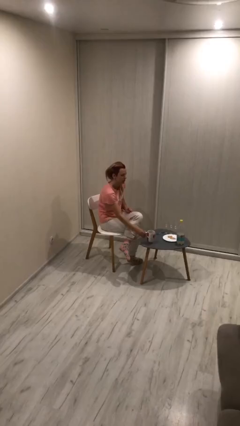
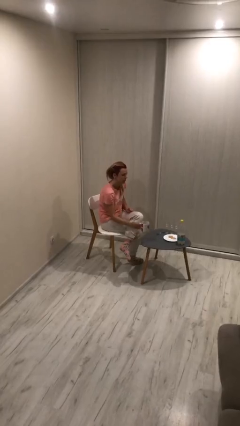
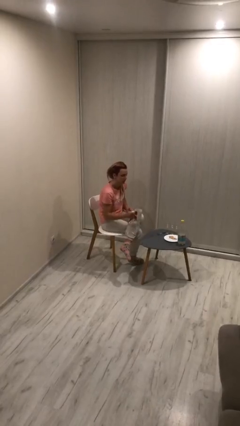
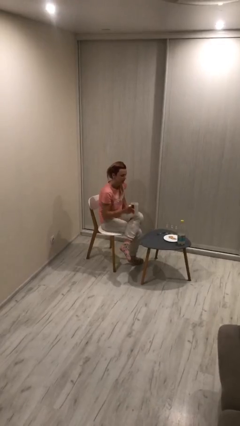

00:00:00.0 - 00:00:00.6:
person picks up object from table

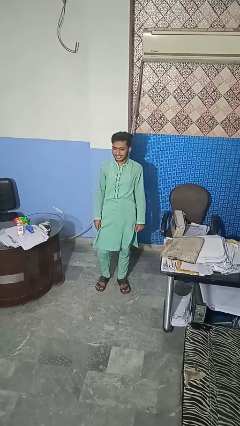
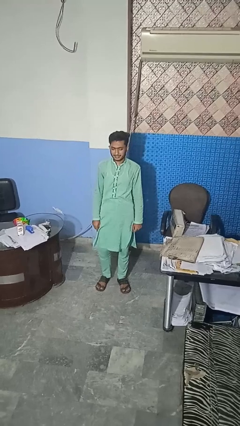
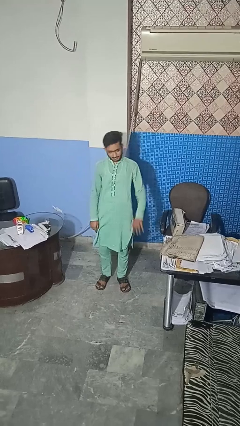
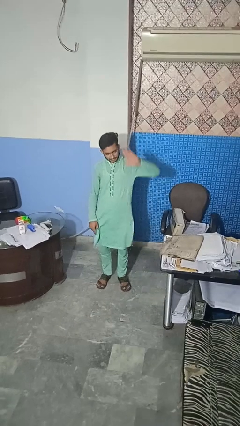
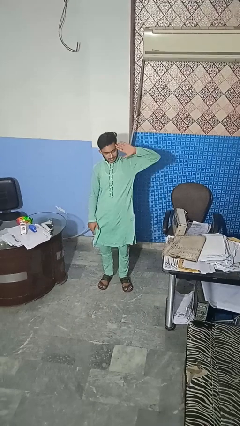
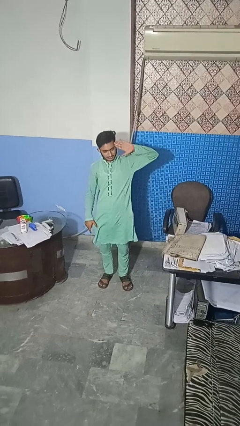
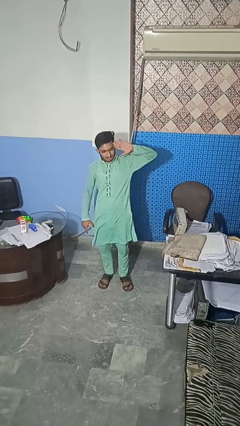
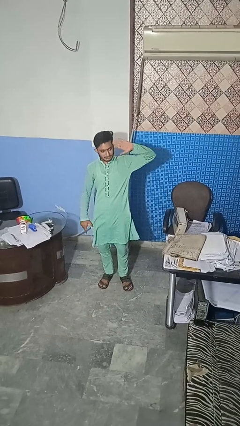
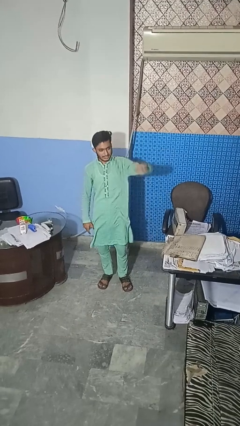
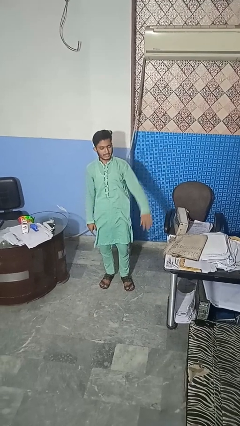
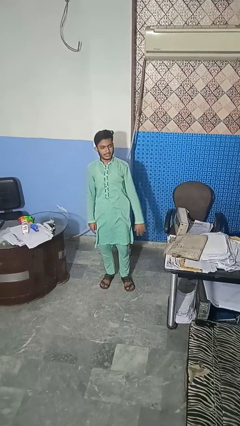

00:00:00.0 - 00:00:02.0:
person salutes

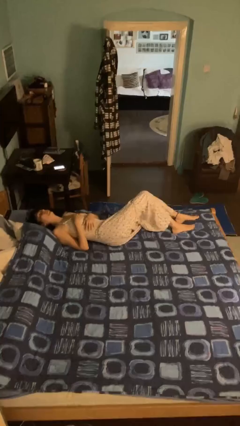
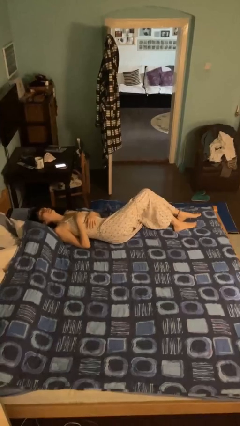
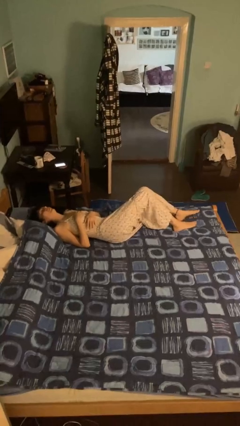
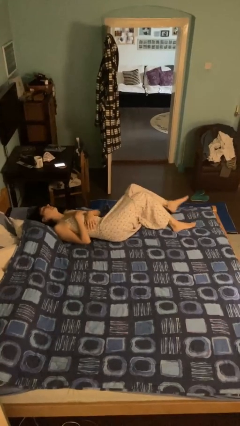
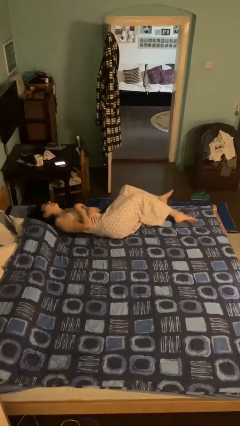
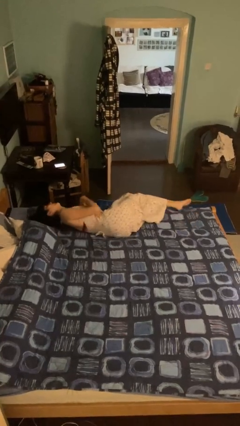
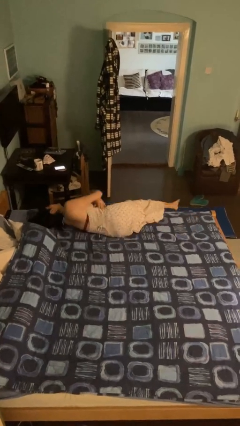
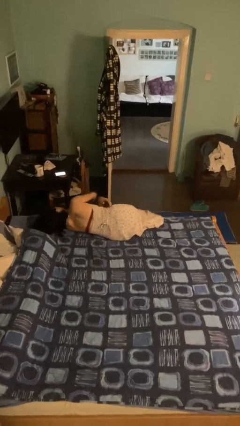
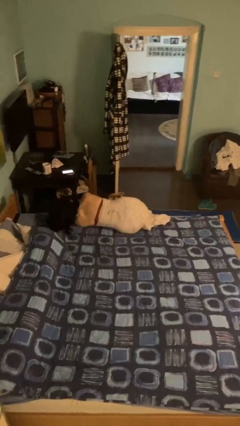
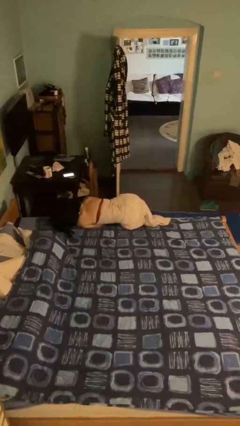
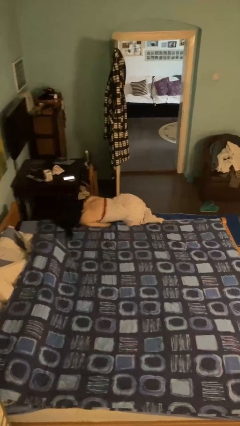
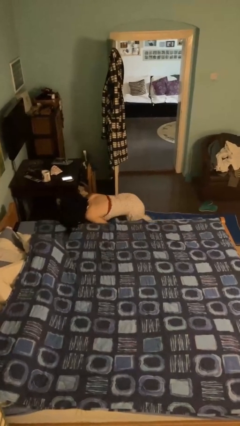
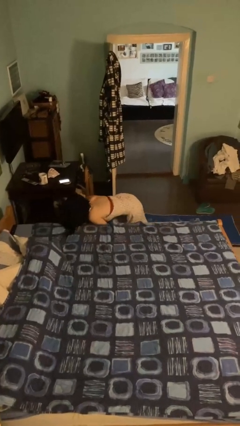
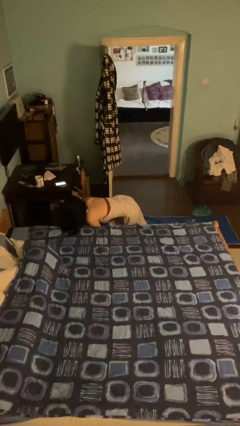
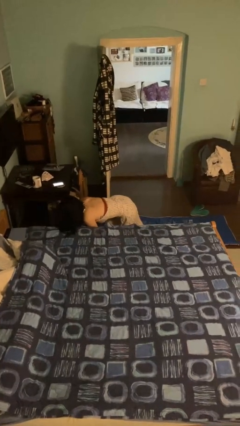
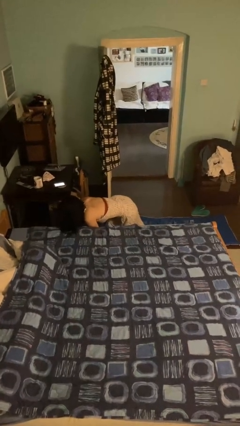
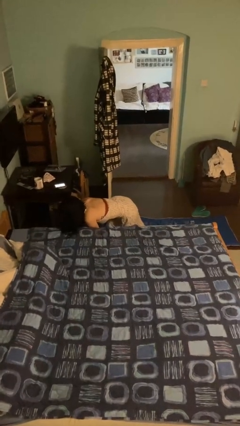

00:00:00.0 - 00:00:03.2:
person falls from bed

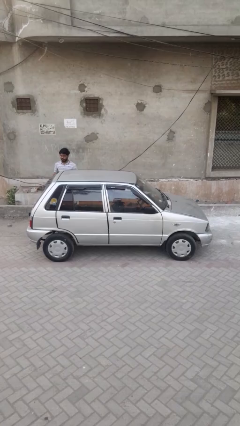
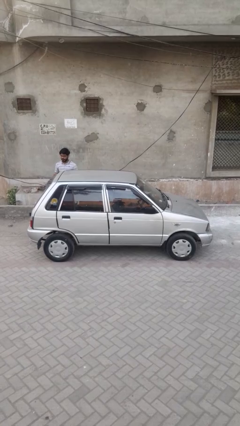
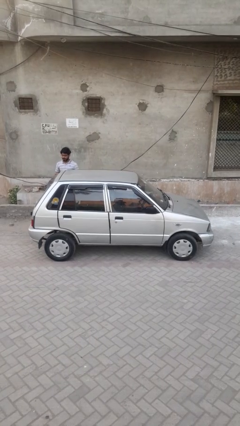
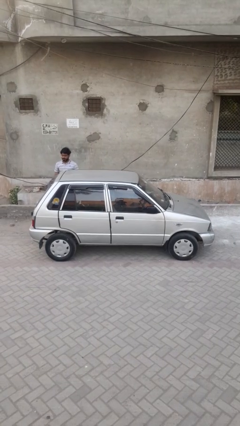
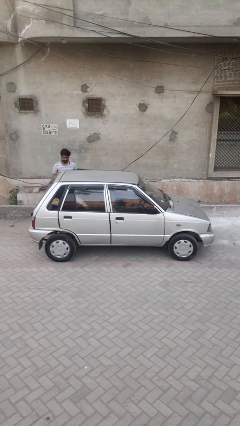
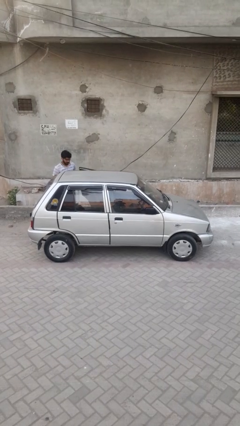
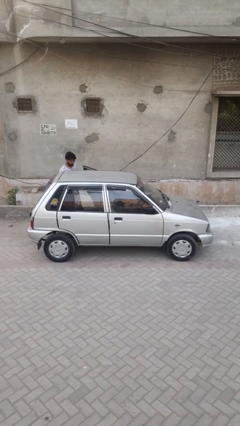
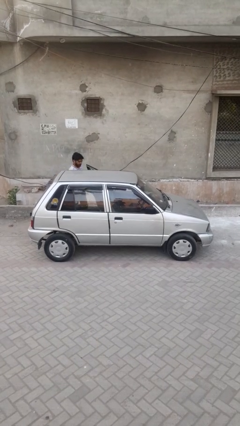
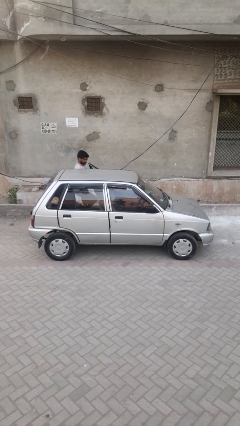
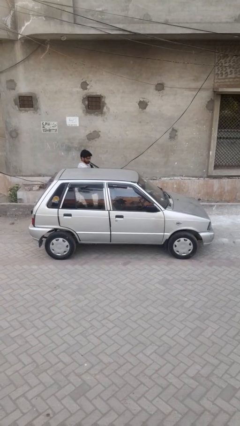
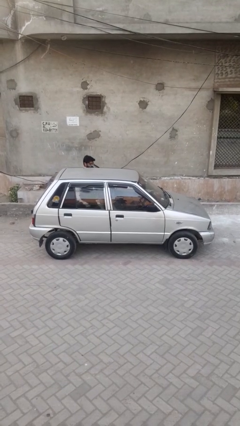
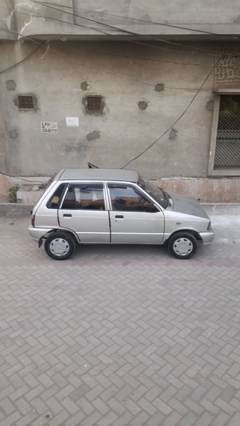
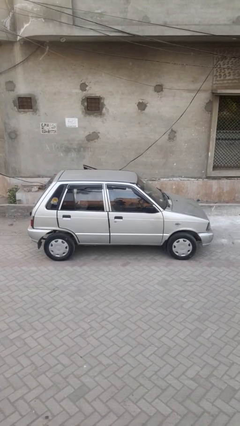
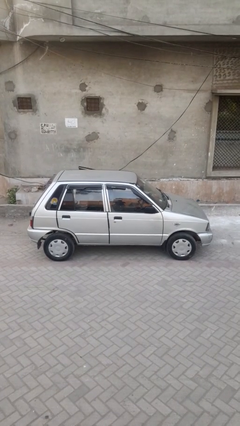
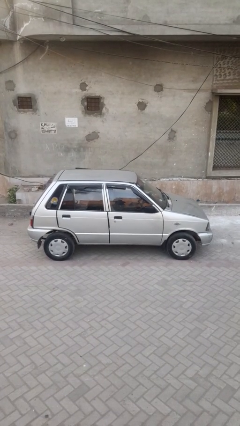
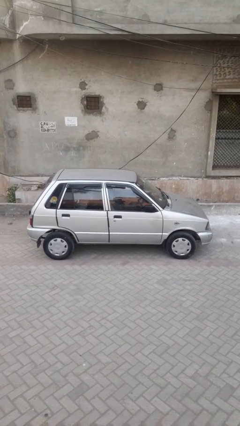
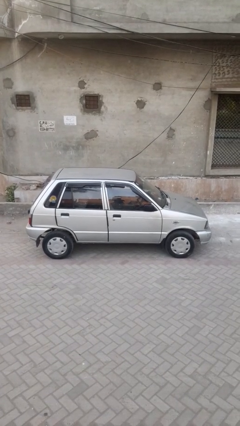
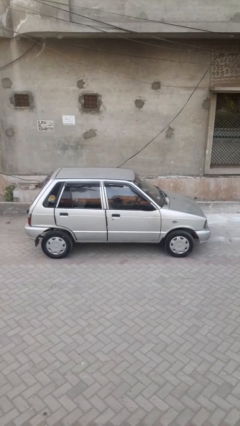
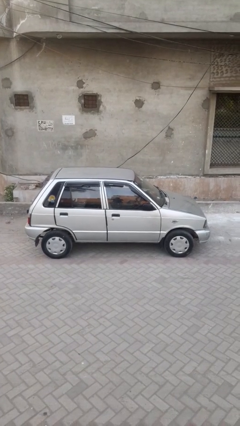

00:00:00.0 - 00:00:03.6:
car picks up person

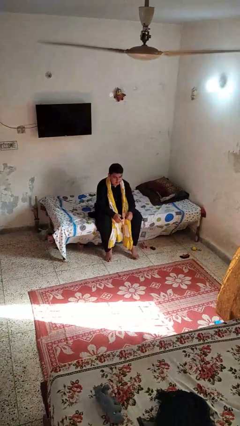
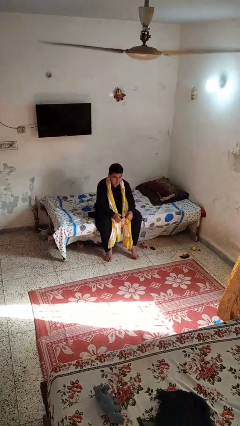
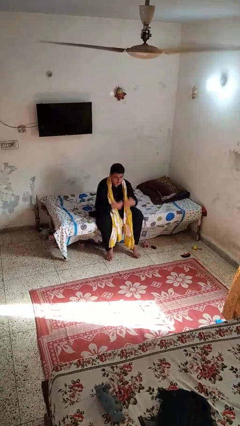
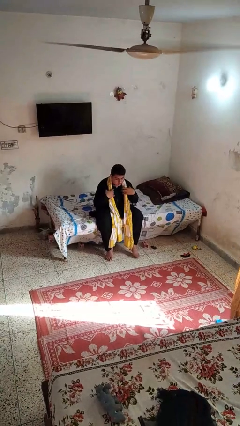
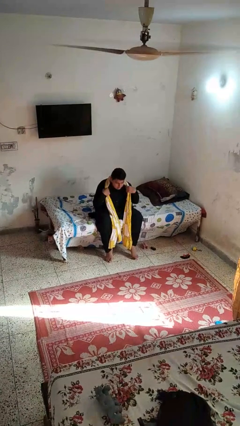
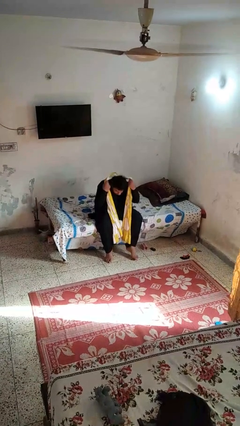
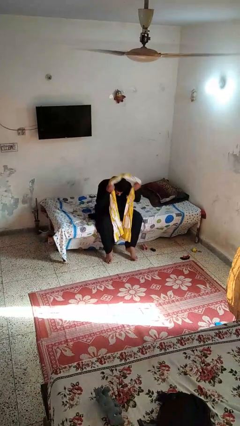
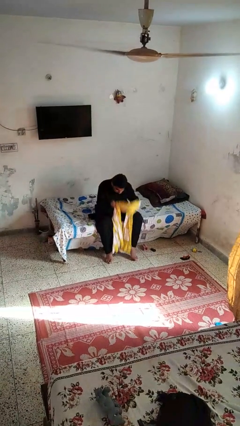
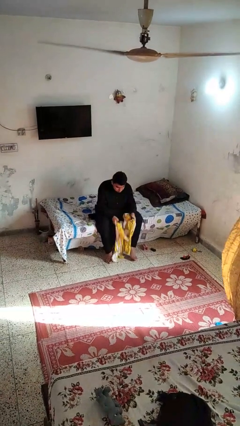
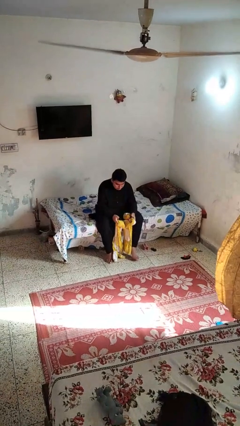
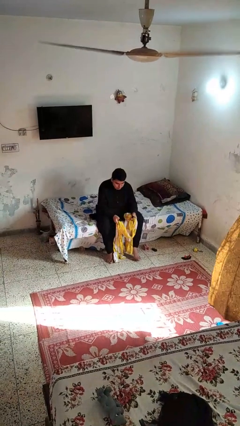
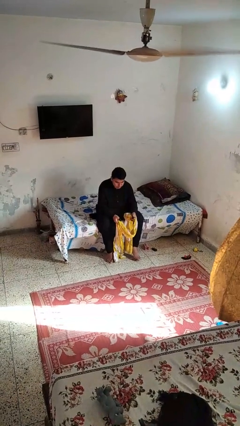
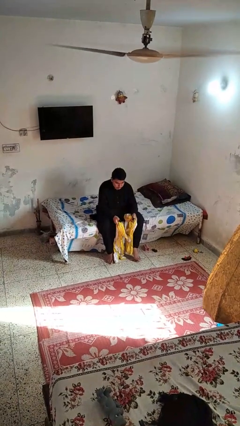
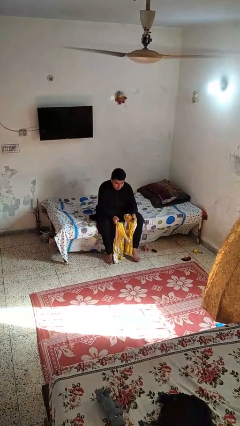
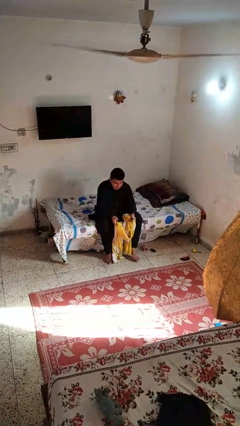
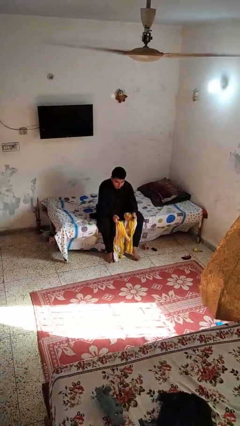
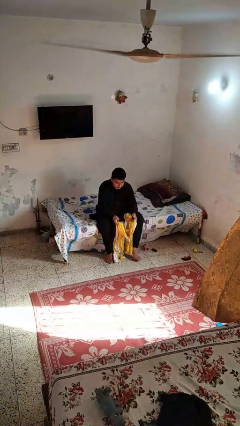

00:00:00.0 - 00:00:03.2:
person takes off scarf

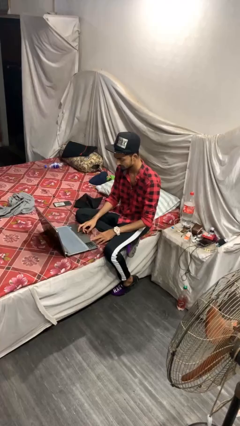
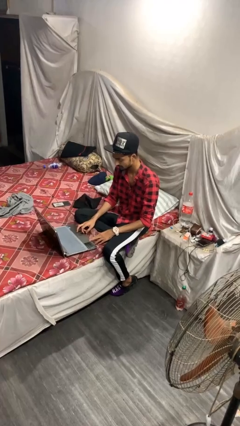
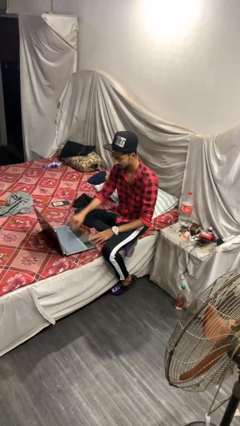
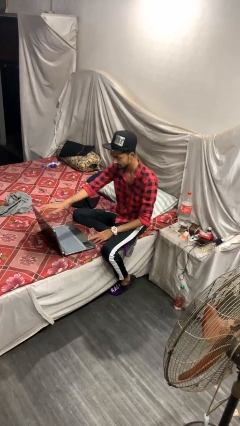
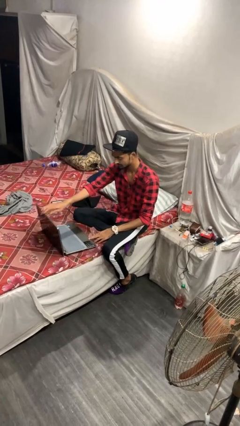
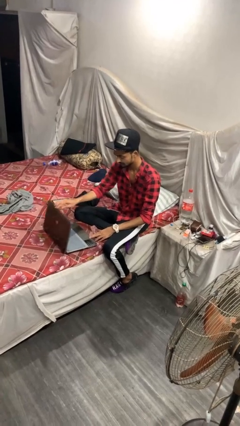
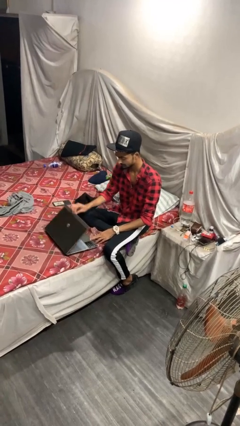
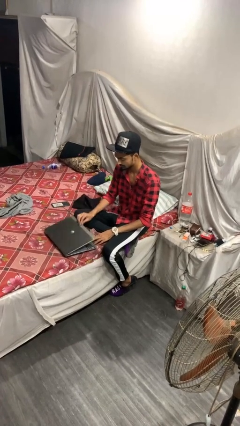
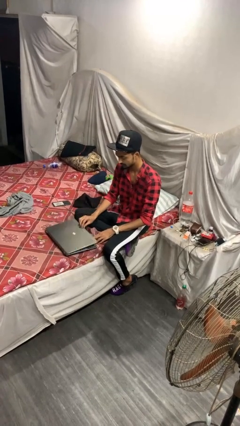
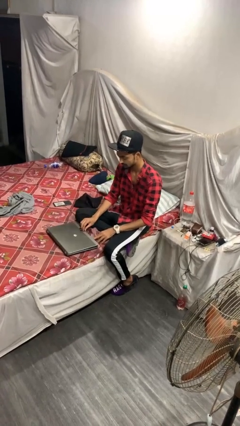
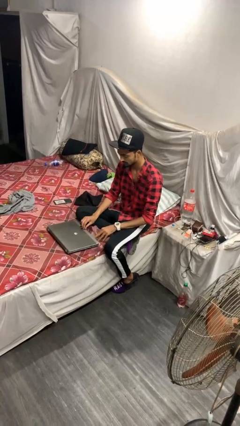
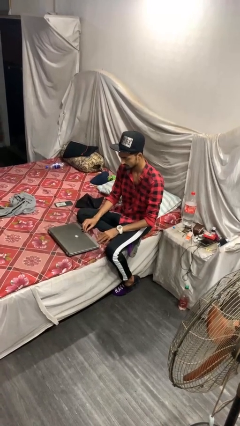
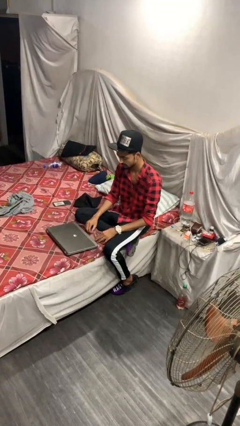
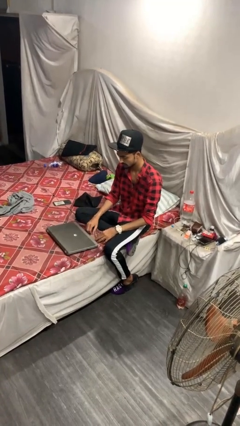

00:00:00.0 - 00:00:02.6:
person closes laptop

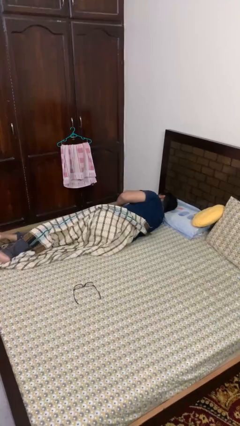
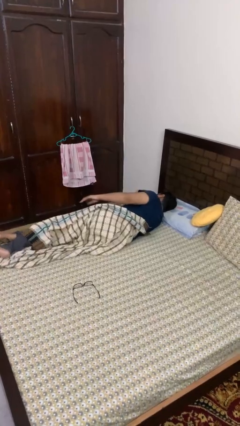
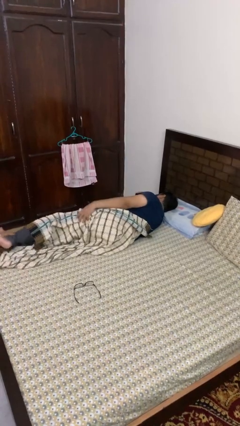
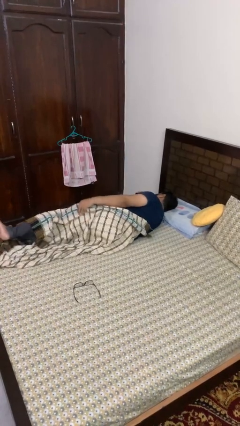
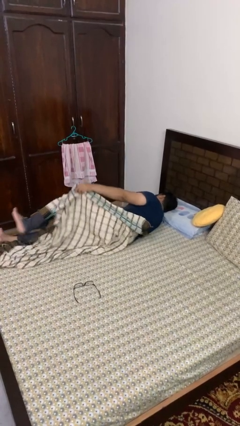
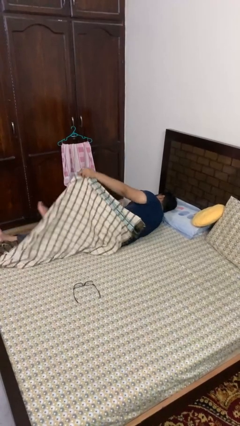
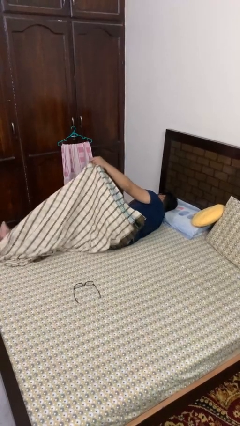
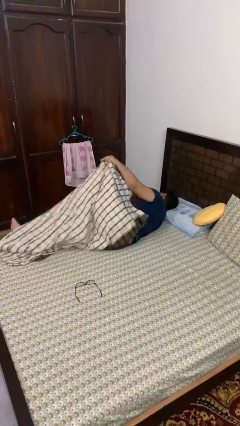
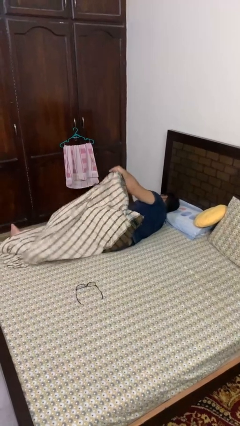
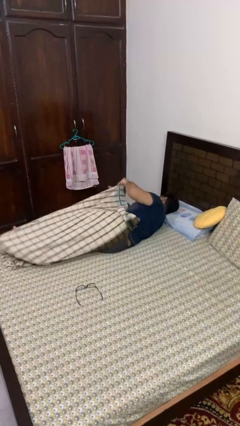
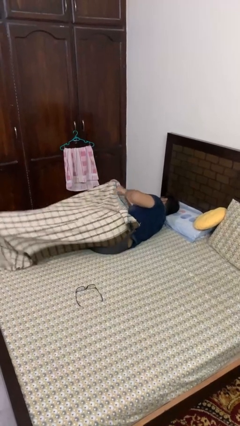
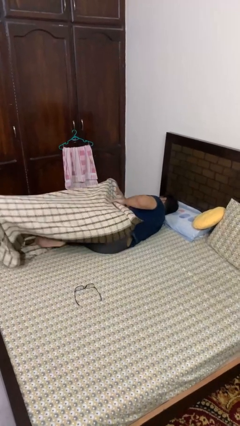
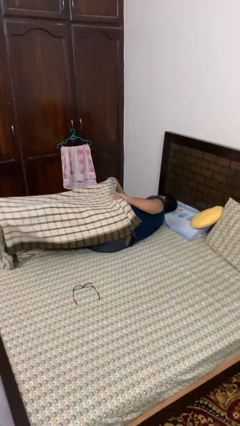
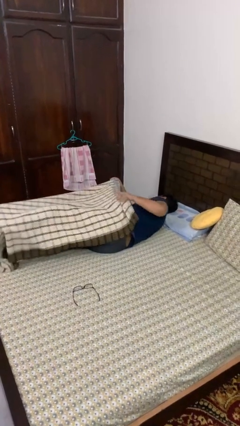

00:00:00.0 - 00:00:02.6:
person covers with bedsheets
